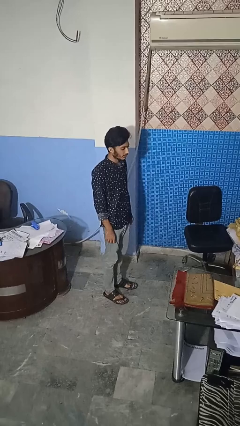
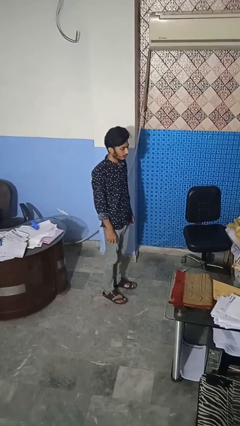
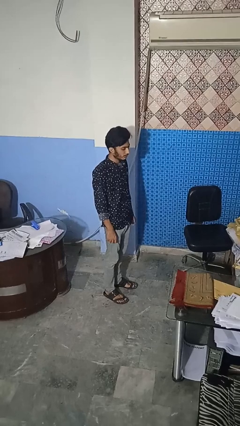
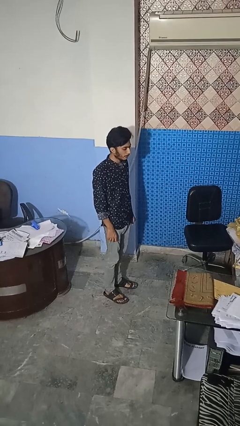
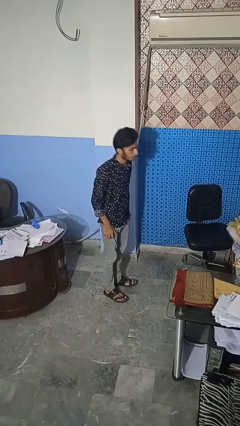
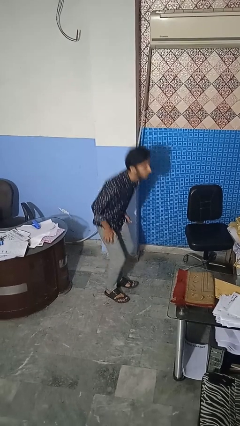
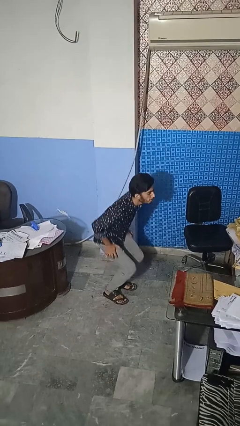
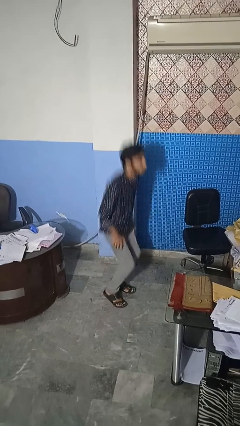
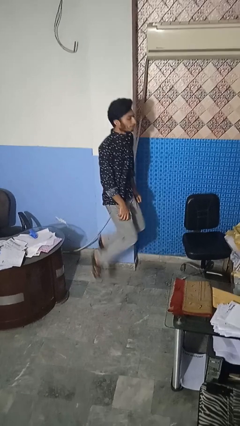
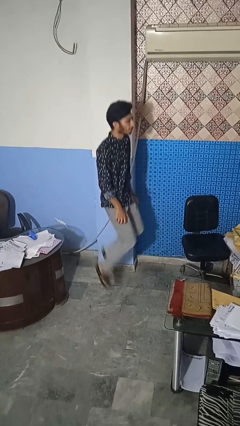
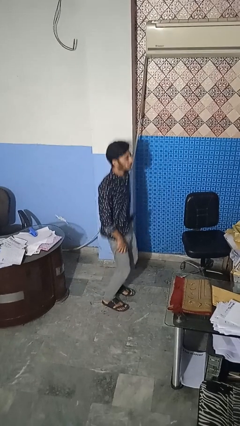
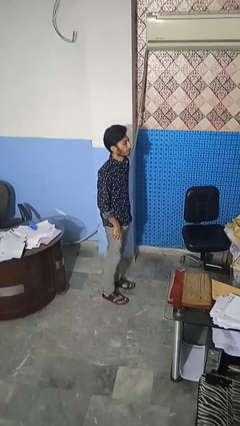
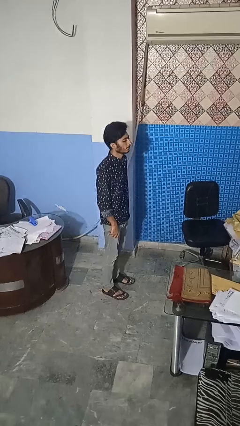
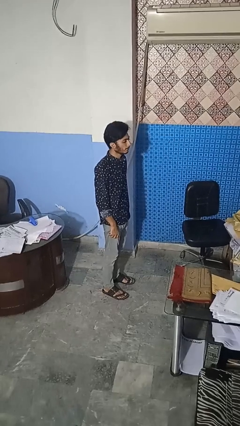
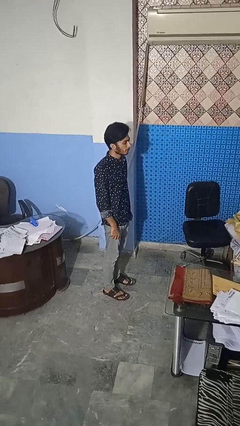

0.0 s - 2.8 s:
person jumps

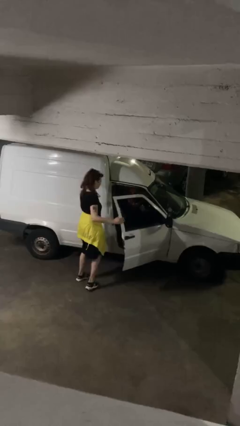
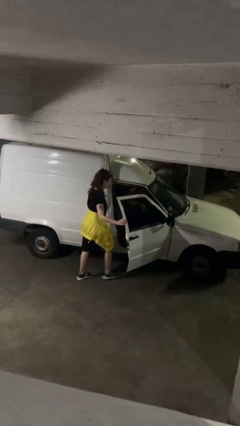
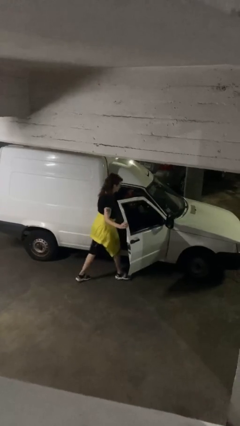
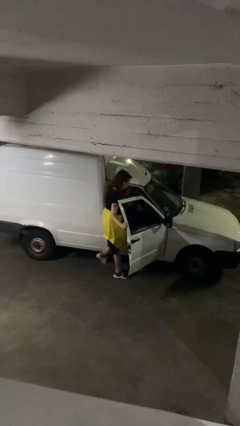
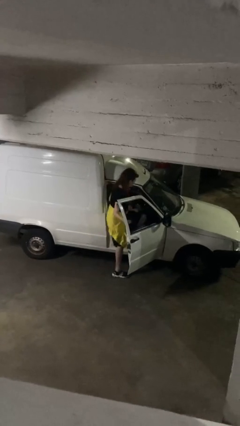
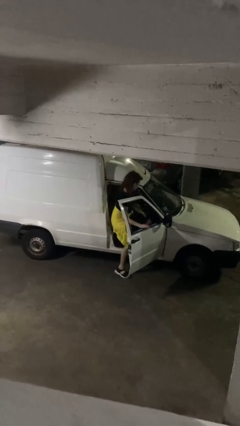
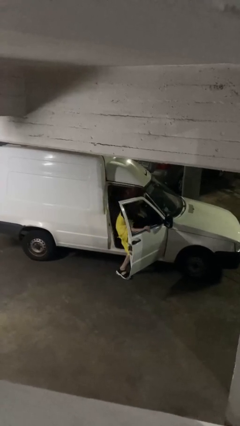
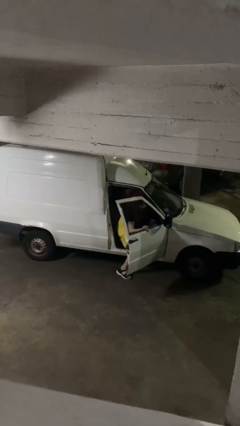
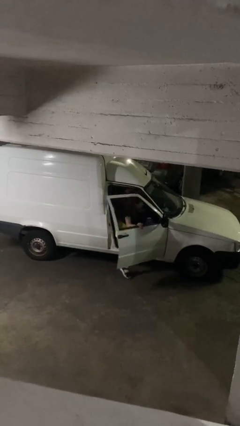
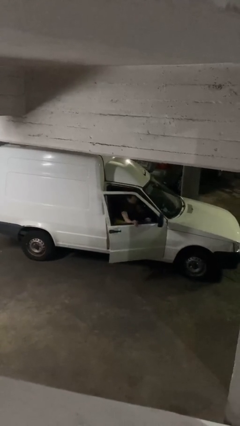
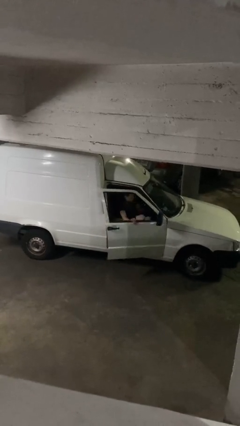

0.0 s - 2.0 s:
car picks up person

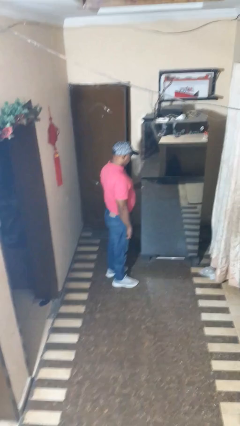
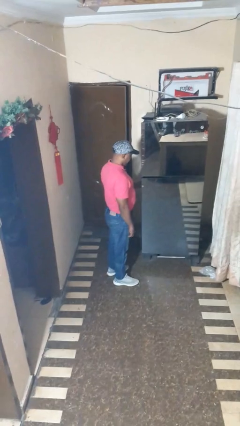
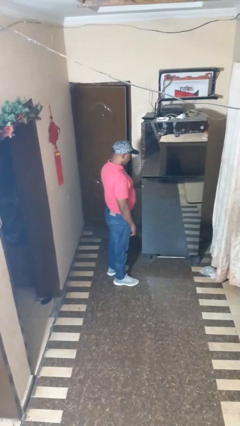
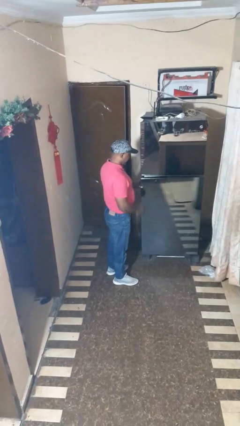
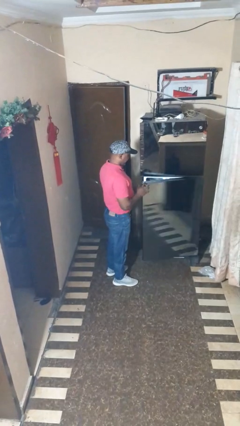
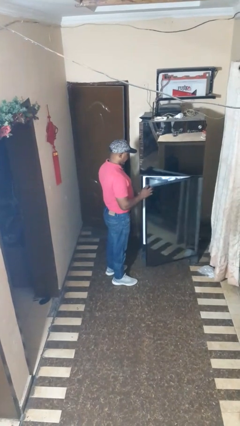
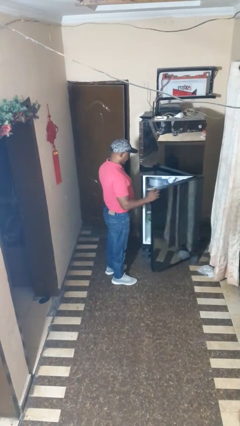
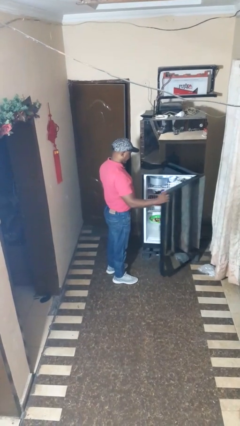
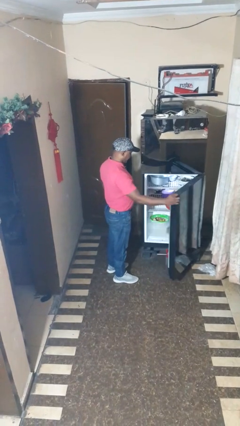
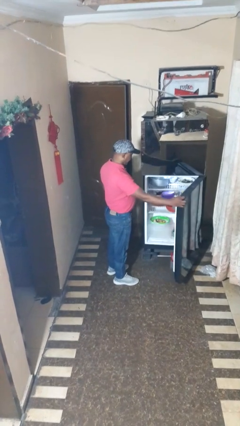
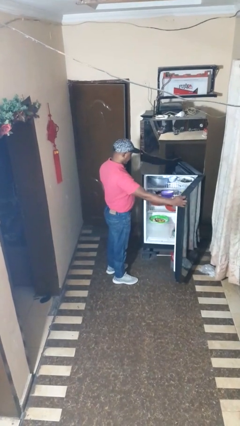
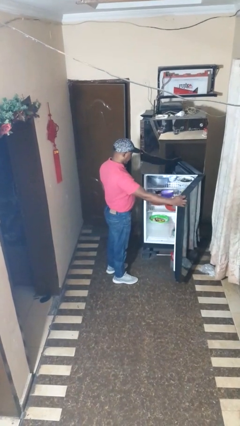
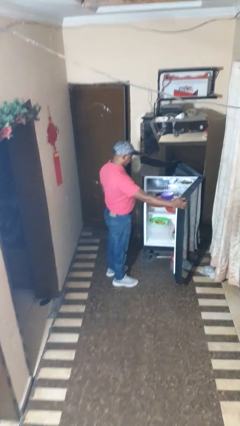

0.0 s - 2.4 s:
person opens refrigerator

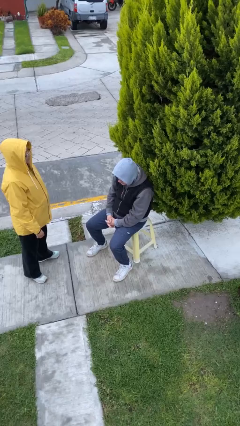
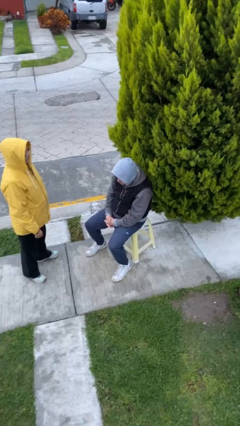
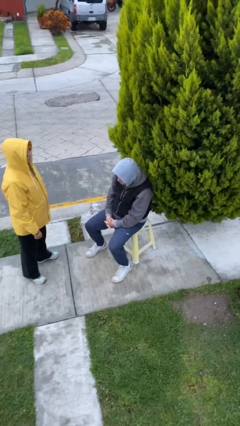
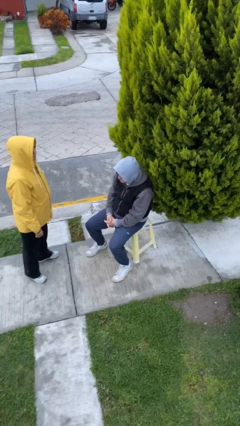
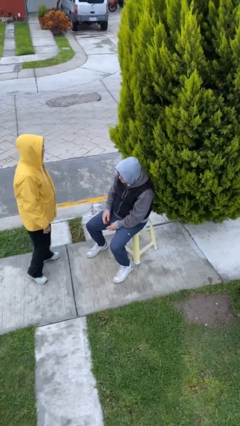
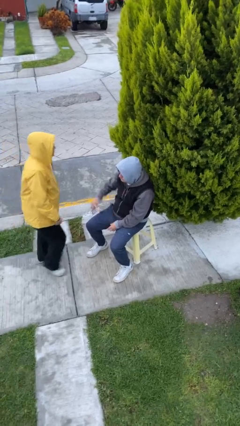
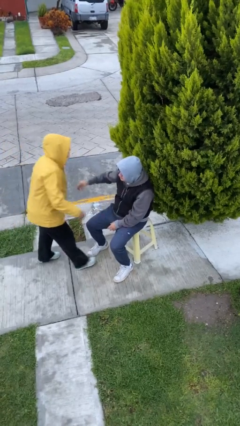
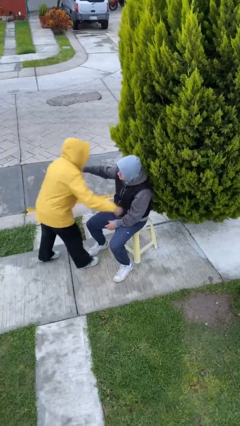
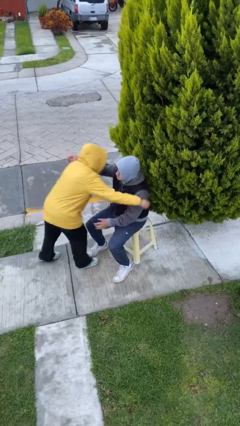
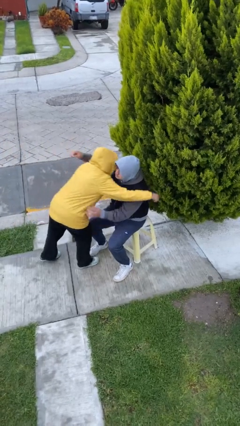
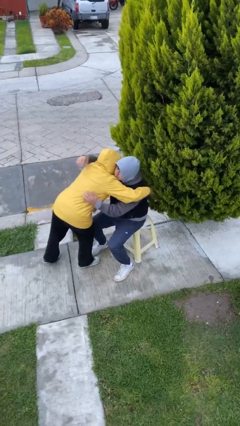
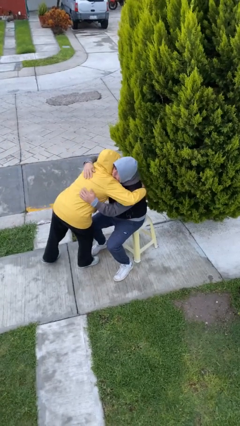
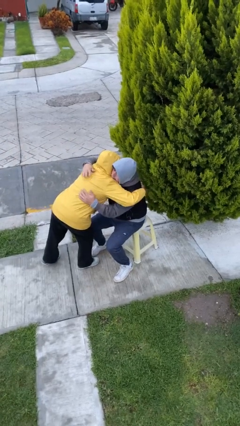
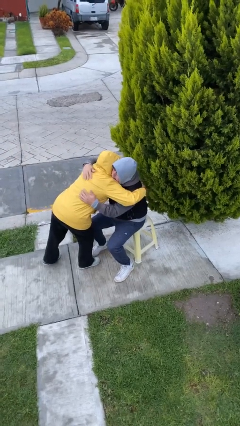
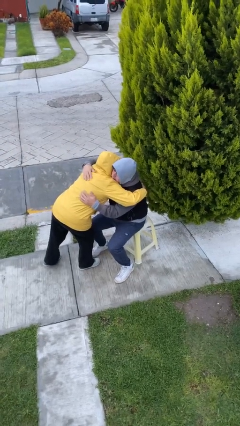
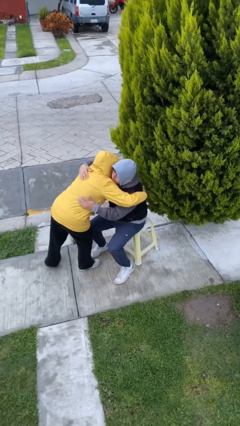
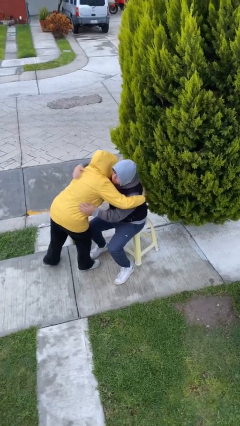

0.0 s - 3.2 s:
person embraces person

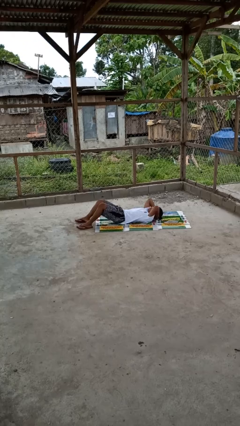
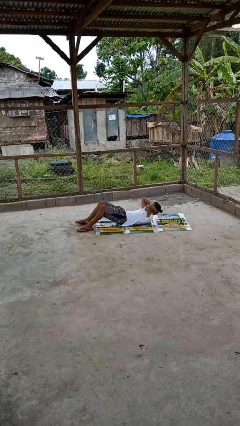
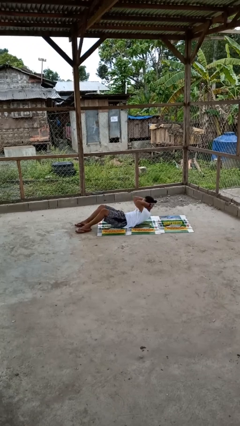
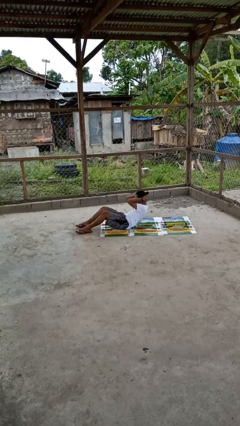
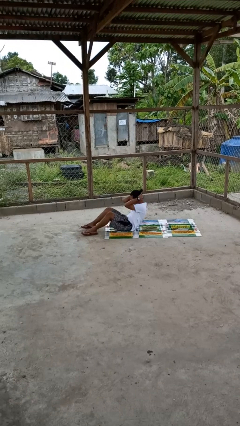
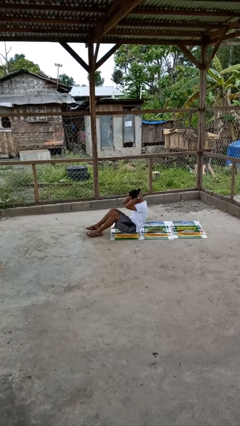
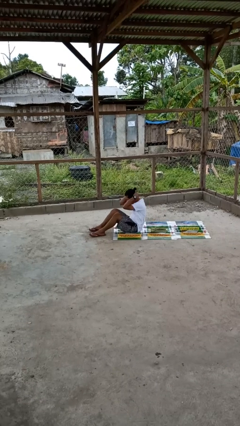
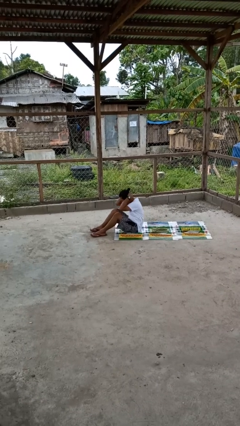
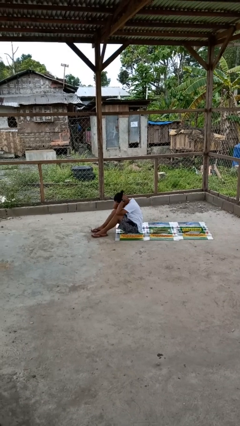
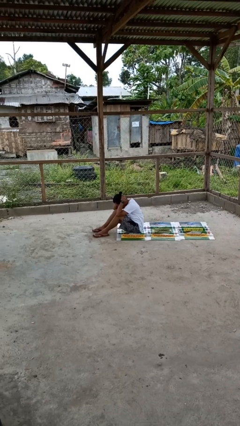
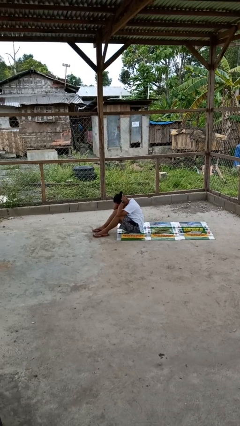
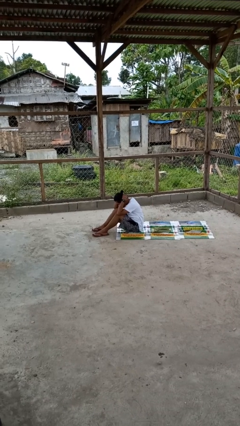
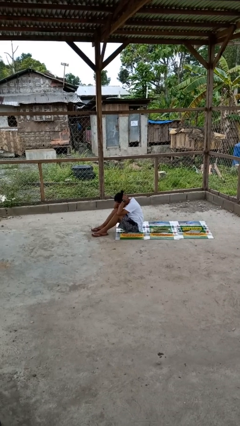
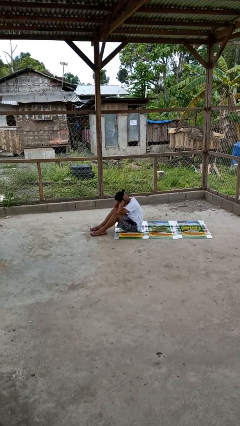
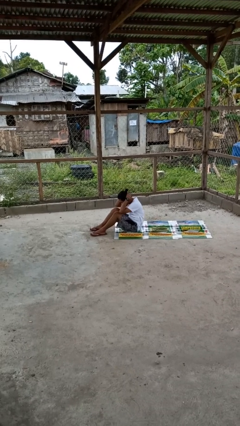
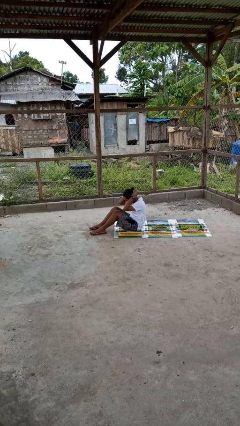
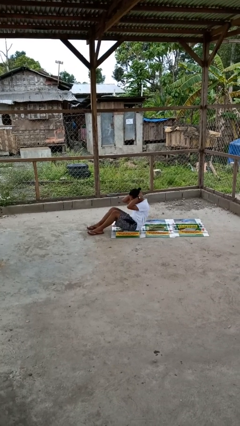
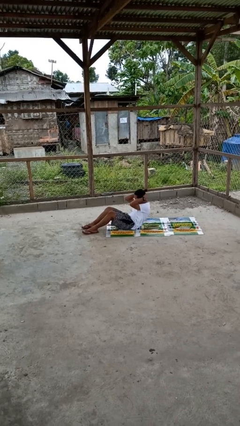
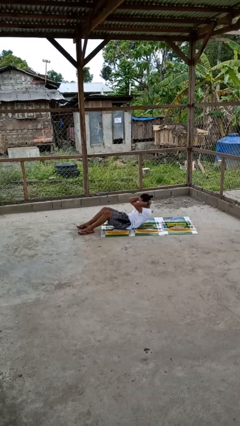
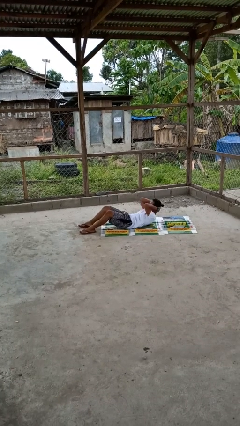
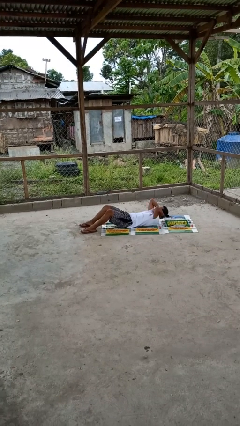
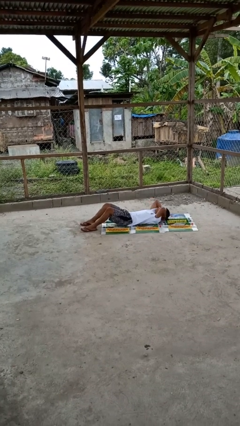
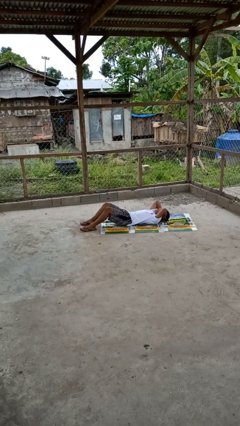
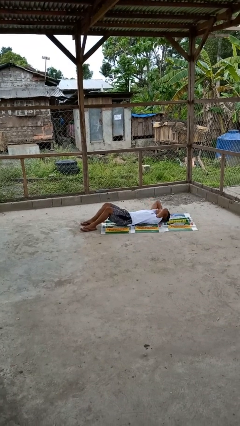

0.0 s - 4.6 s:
person exercises with situp

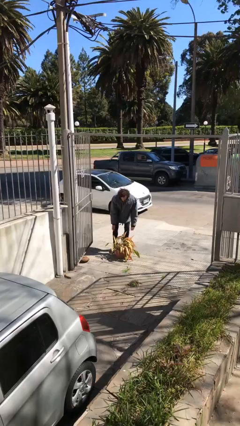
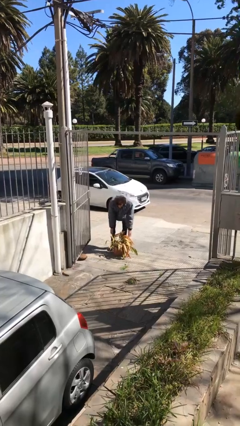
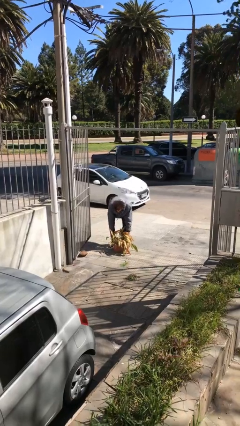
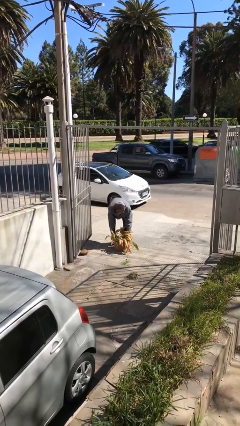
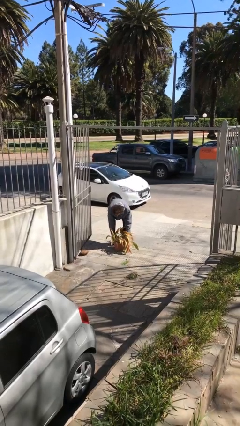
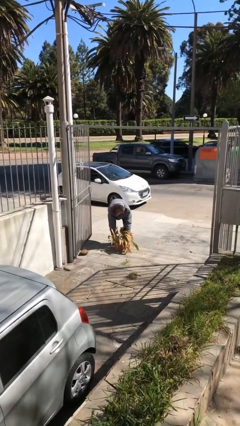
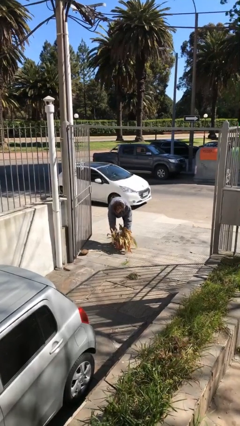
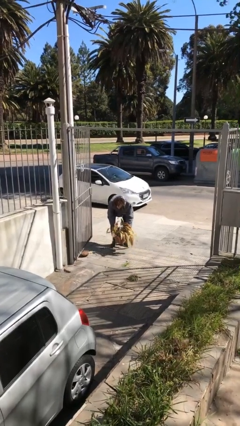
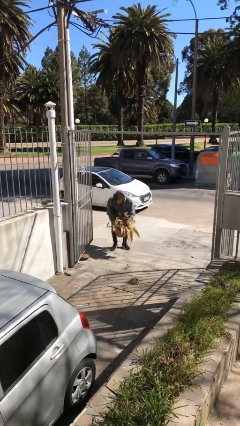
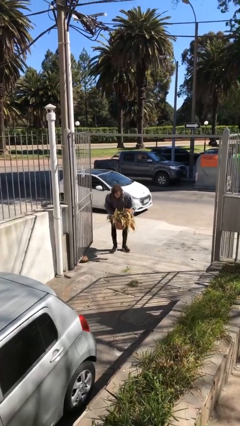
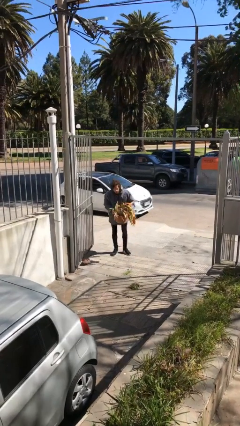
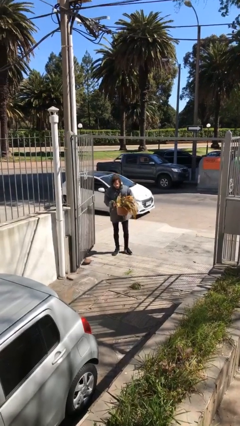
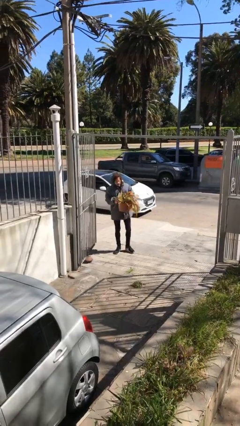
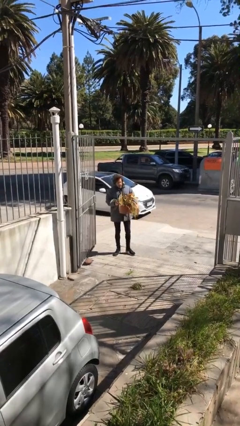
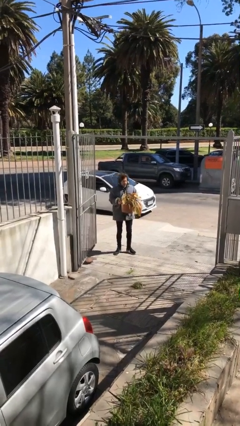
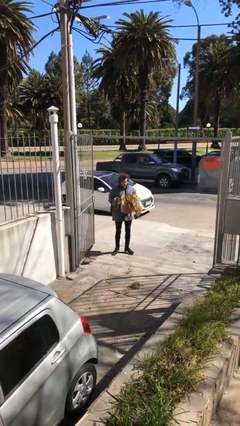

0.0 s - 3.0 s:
person picks up object from floor
